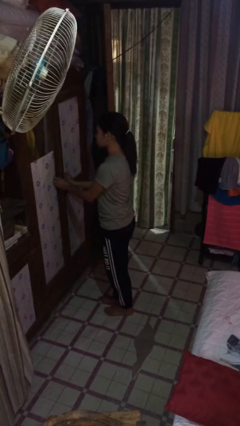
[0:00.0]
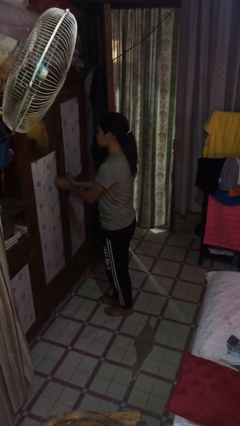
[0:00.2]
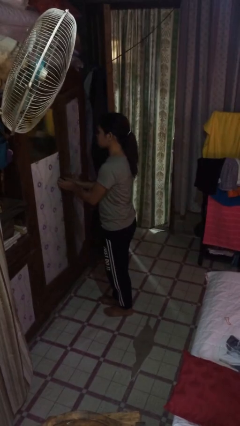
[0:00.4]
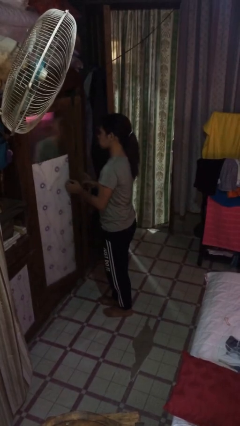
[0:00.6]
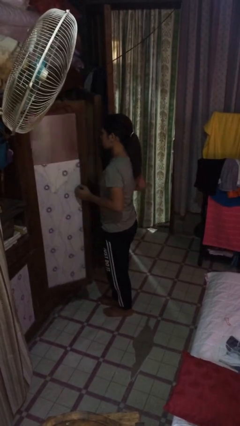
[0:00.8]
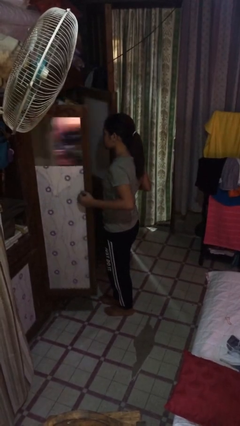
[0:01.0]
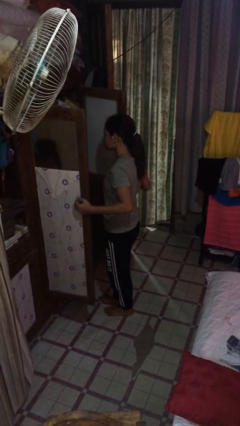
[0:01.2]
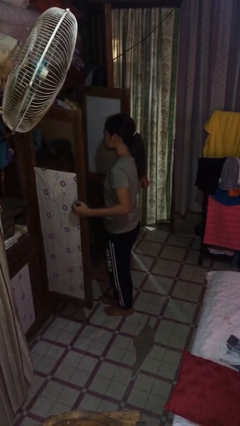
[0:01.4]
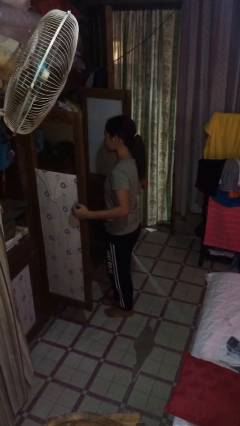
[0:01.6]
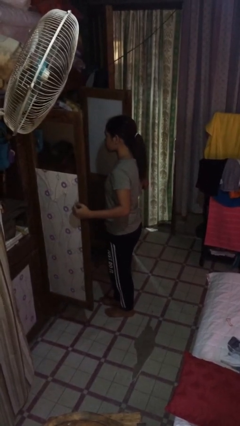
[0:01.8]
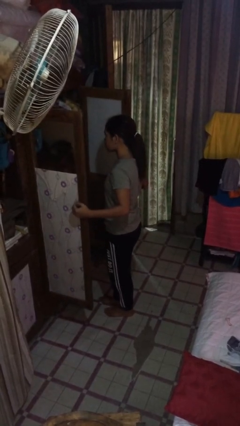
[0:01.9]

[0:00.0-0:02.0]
person opens closet door

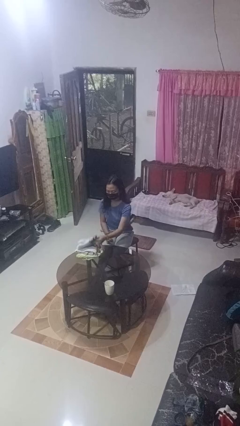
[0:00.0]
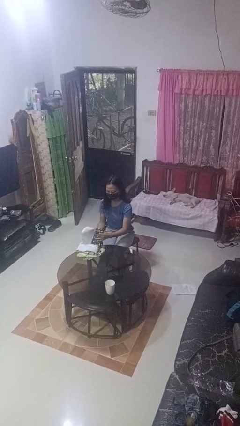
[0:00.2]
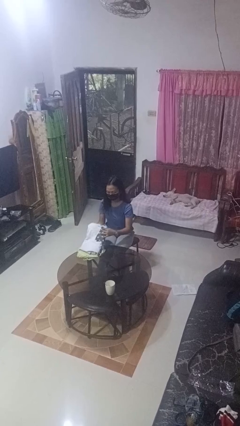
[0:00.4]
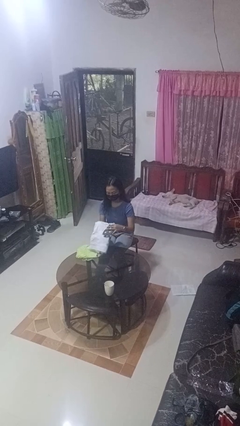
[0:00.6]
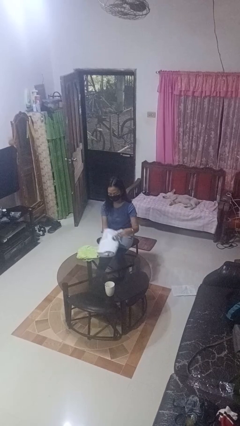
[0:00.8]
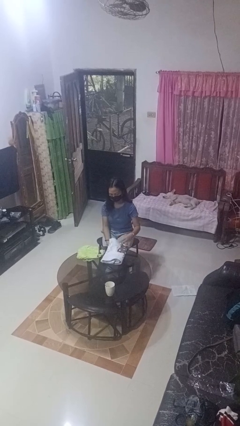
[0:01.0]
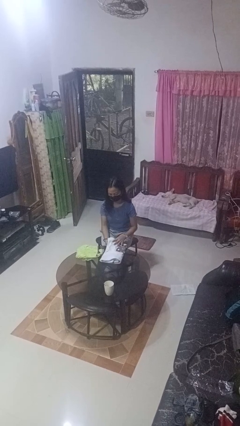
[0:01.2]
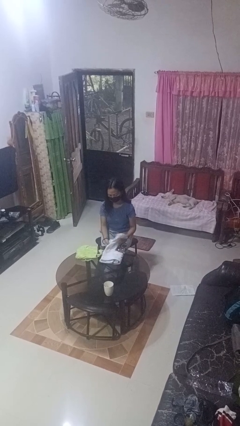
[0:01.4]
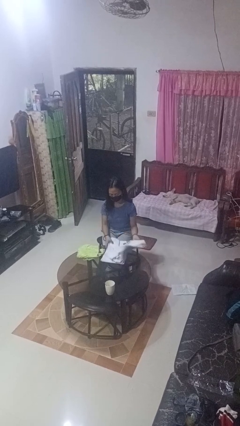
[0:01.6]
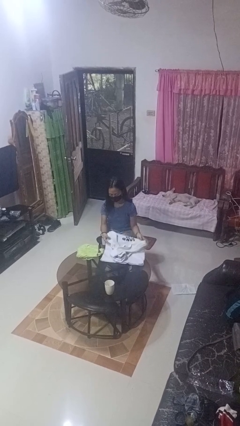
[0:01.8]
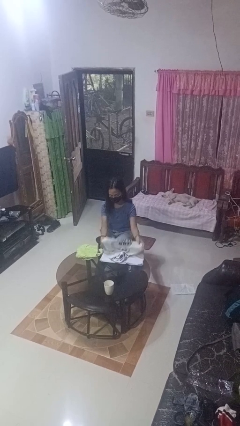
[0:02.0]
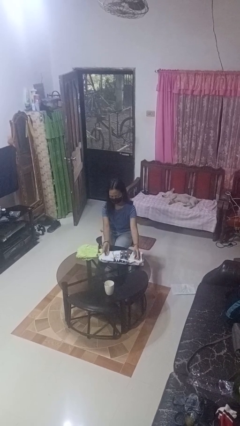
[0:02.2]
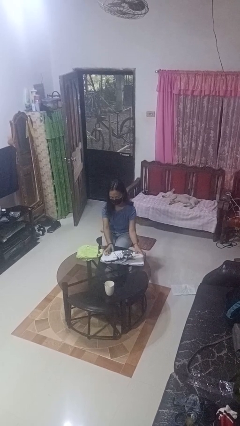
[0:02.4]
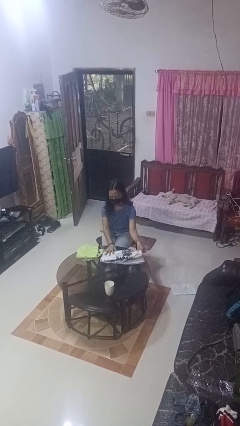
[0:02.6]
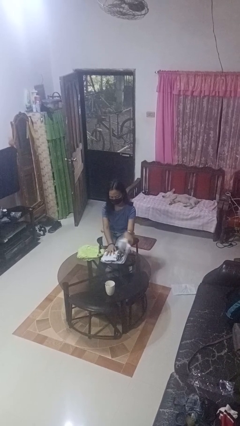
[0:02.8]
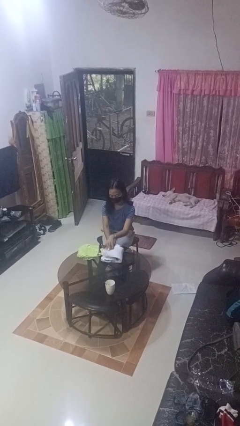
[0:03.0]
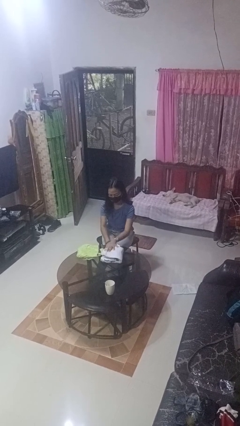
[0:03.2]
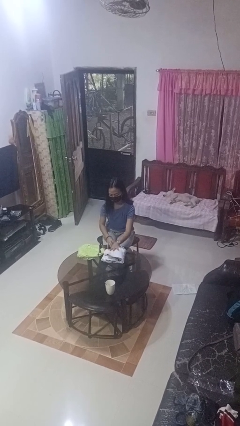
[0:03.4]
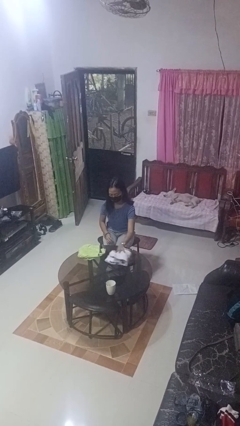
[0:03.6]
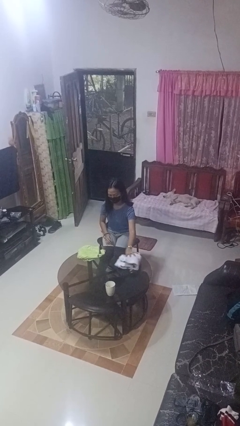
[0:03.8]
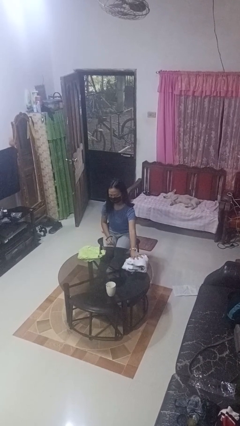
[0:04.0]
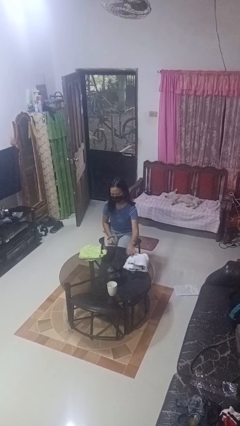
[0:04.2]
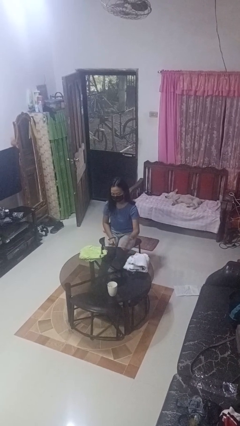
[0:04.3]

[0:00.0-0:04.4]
person folds towel

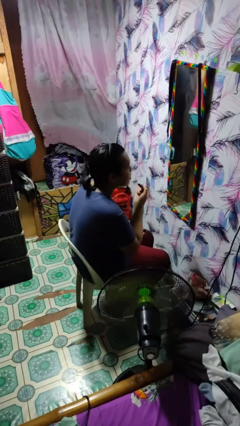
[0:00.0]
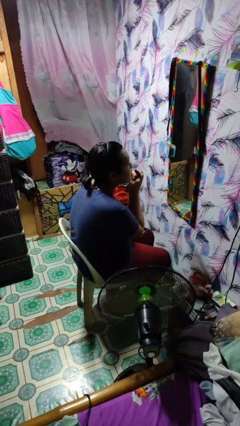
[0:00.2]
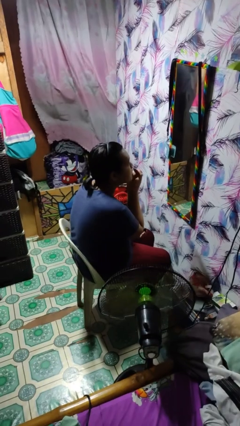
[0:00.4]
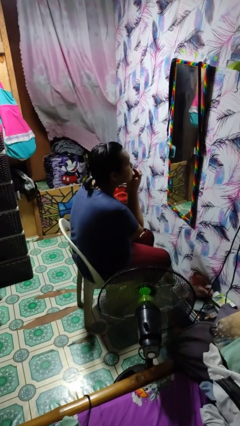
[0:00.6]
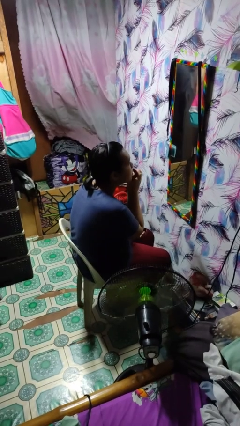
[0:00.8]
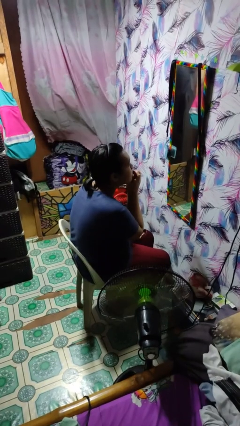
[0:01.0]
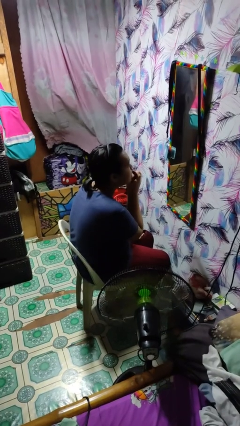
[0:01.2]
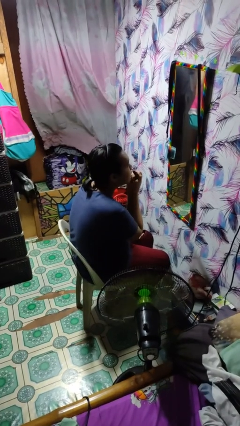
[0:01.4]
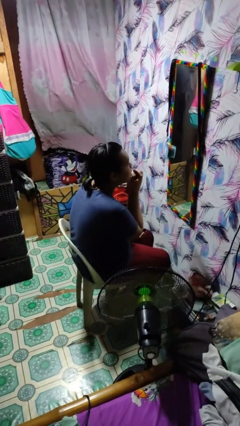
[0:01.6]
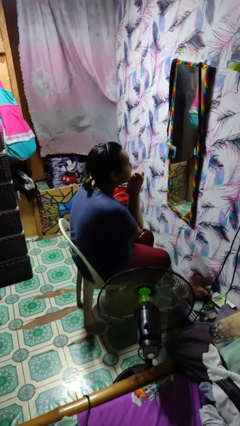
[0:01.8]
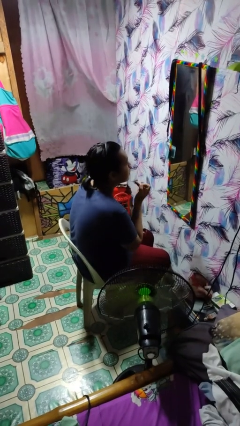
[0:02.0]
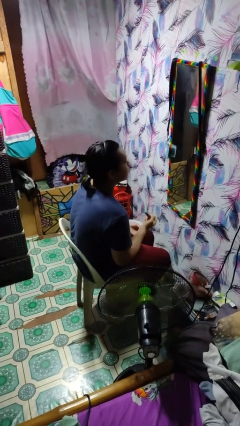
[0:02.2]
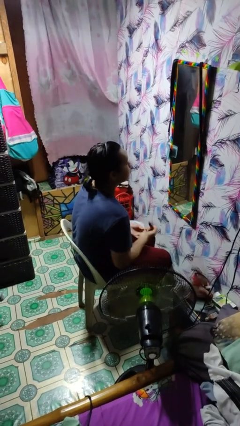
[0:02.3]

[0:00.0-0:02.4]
person applies lip makeup

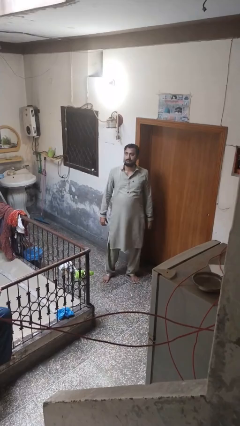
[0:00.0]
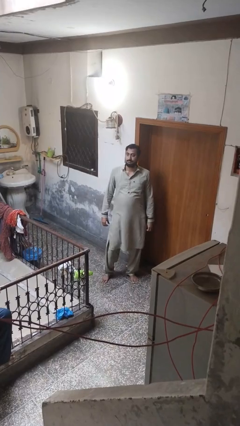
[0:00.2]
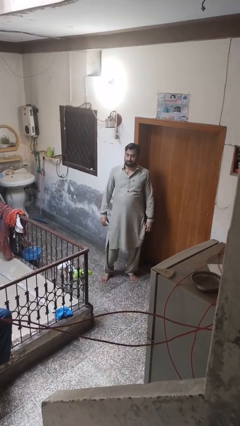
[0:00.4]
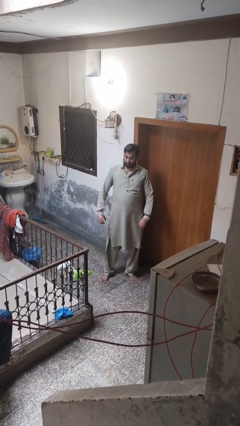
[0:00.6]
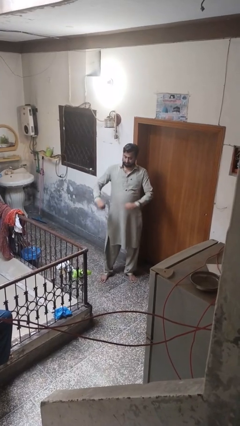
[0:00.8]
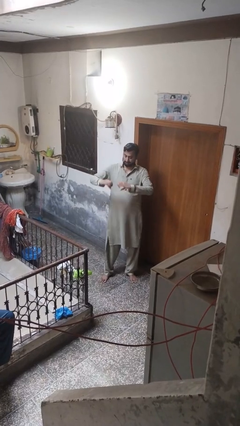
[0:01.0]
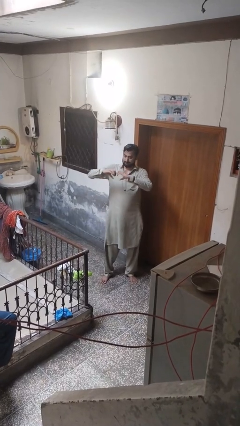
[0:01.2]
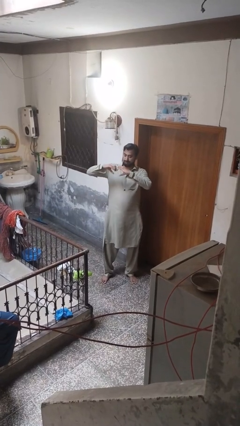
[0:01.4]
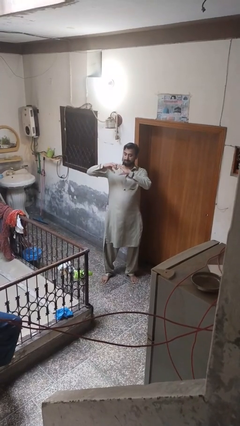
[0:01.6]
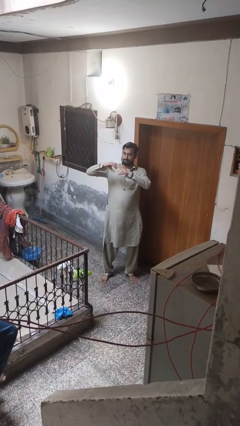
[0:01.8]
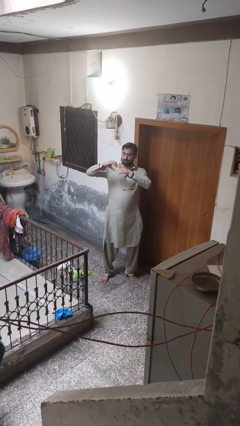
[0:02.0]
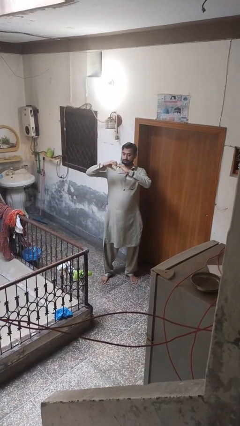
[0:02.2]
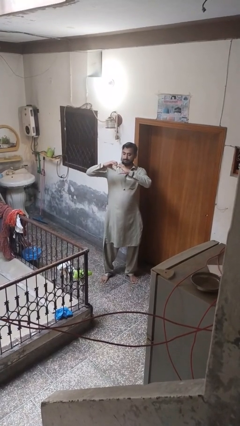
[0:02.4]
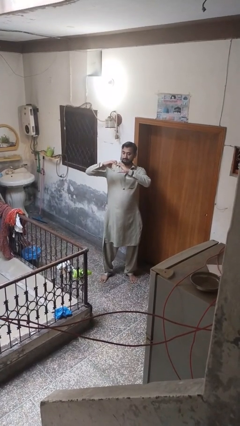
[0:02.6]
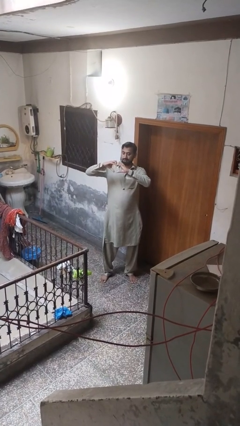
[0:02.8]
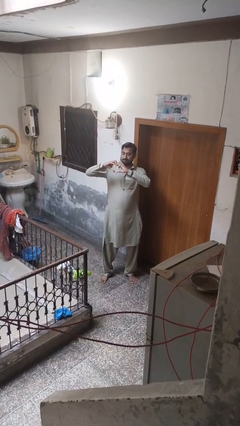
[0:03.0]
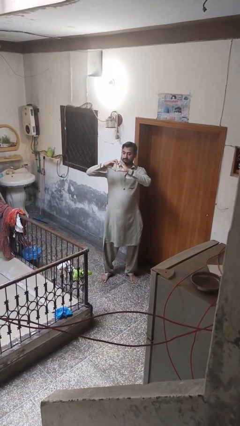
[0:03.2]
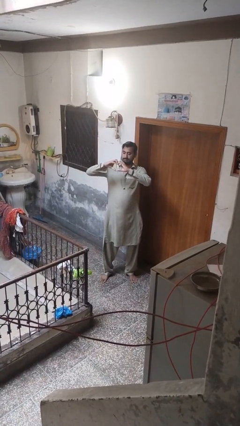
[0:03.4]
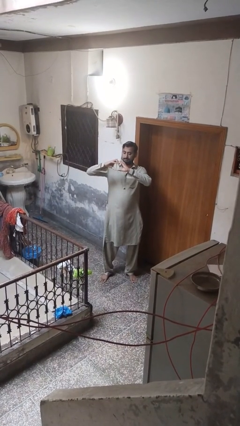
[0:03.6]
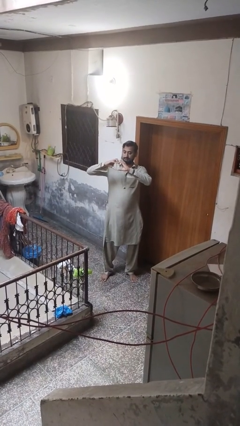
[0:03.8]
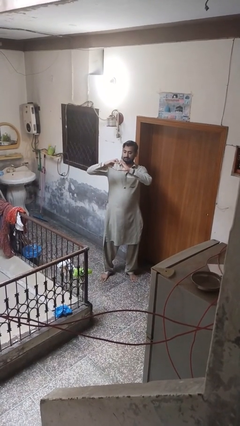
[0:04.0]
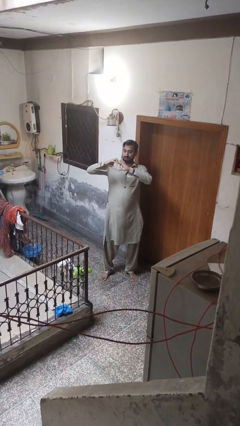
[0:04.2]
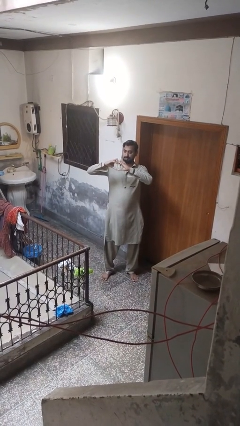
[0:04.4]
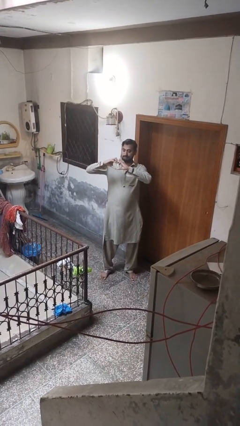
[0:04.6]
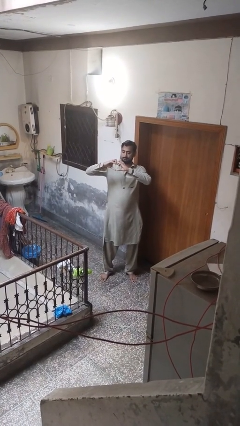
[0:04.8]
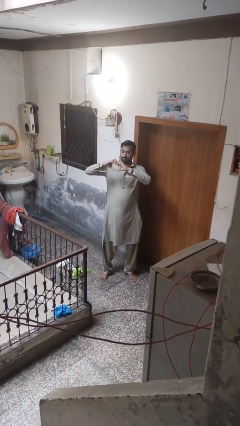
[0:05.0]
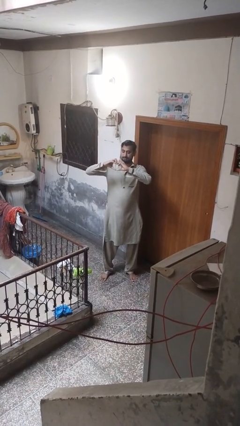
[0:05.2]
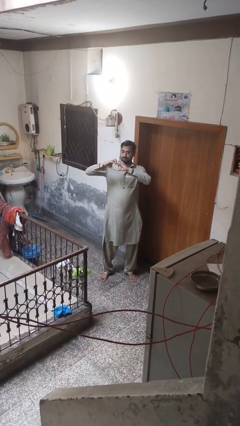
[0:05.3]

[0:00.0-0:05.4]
person gestures heart

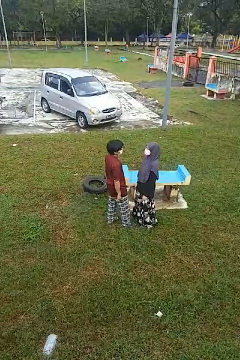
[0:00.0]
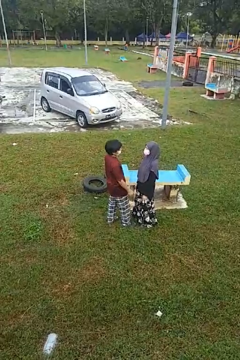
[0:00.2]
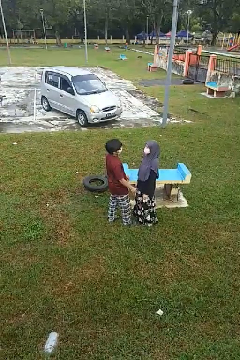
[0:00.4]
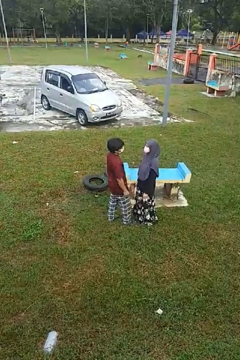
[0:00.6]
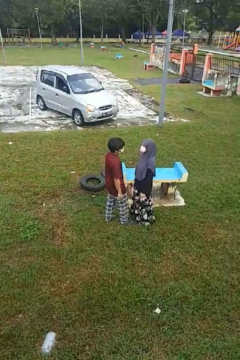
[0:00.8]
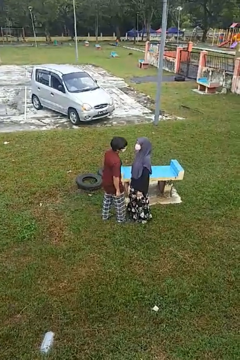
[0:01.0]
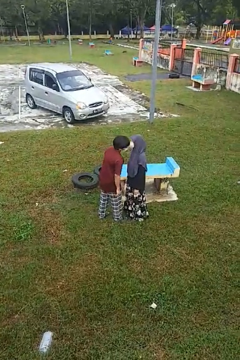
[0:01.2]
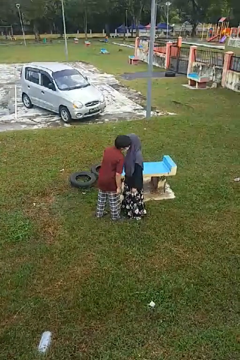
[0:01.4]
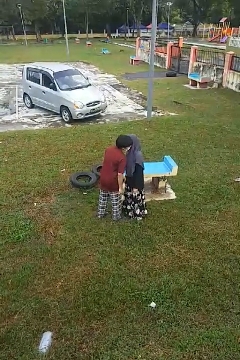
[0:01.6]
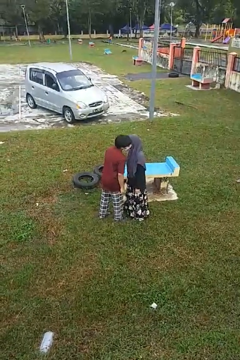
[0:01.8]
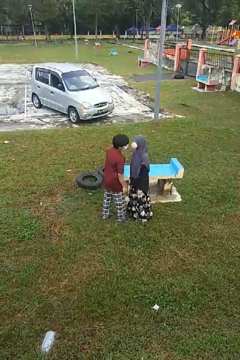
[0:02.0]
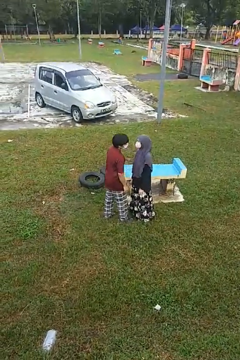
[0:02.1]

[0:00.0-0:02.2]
person kisses cheek of person

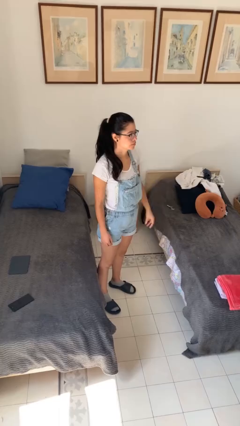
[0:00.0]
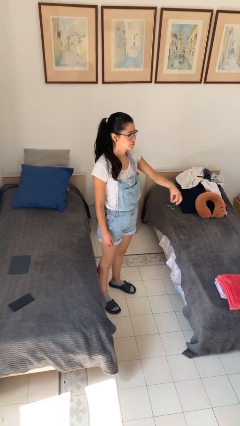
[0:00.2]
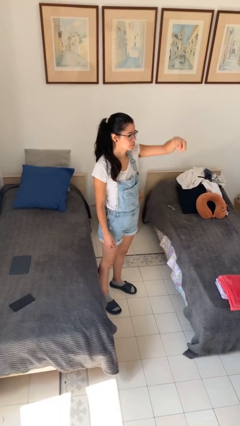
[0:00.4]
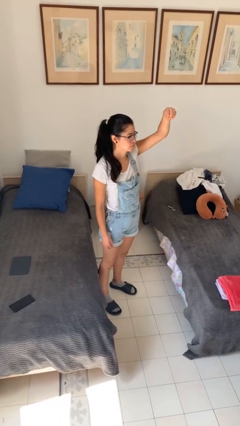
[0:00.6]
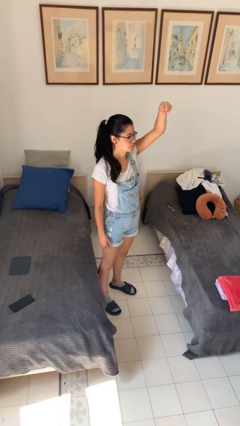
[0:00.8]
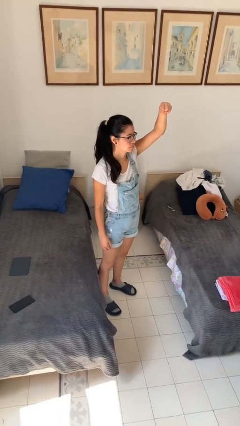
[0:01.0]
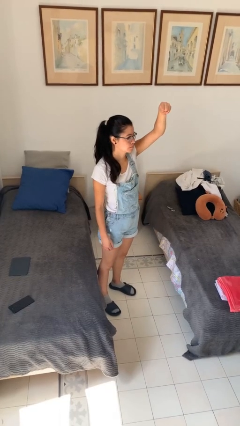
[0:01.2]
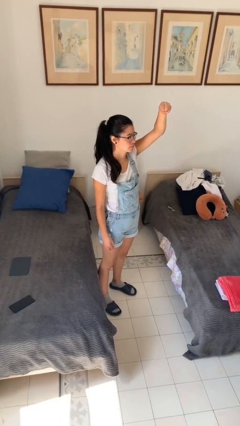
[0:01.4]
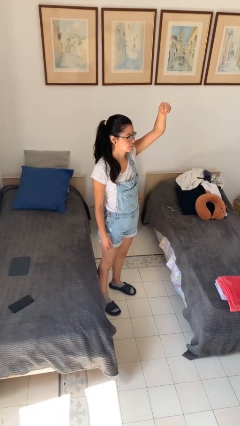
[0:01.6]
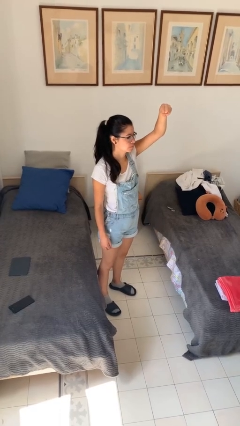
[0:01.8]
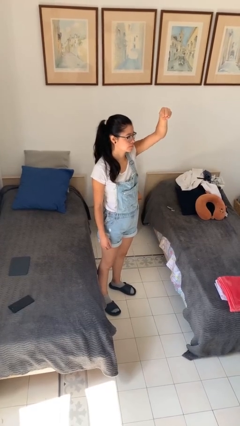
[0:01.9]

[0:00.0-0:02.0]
person gestures hang loose
